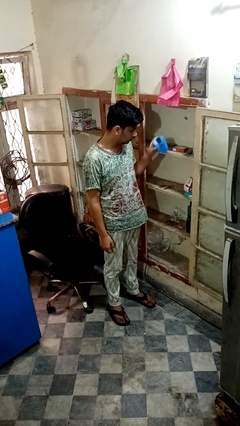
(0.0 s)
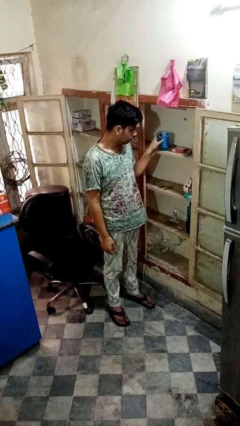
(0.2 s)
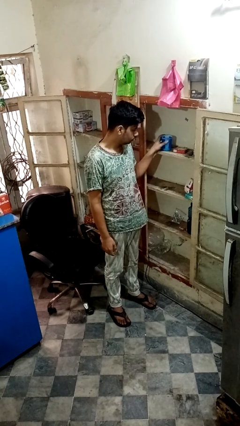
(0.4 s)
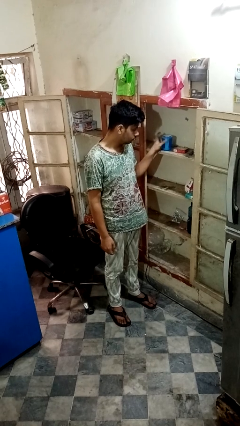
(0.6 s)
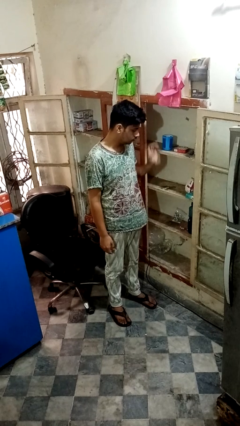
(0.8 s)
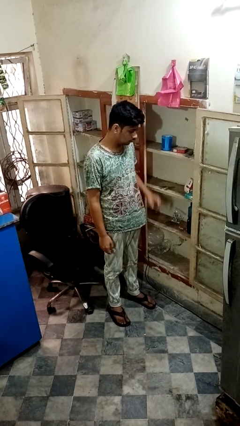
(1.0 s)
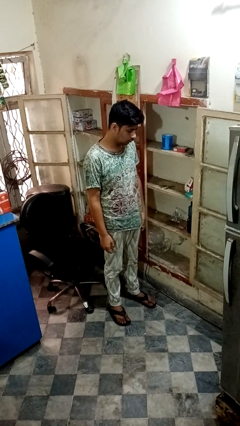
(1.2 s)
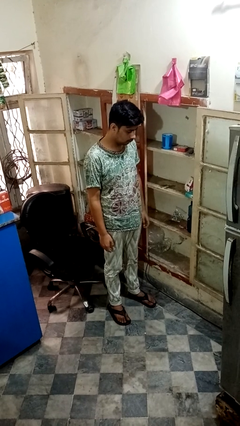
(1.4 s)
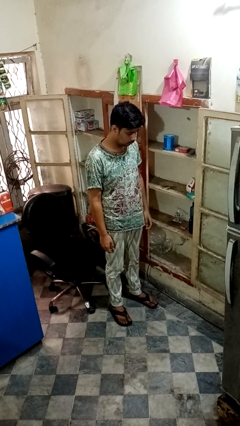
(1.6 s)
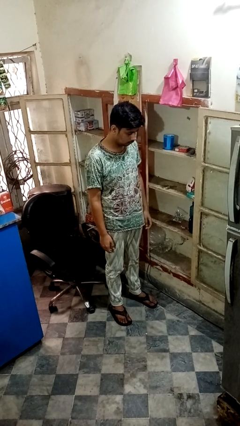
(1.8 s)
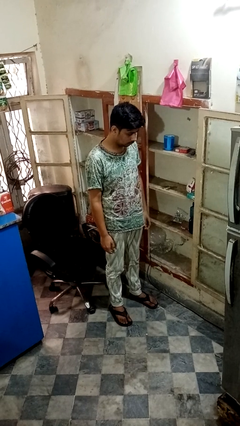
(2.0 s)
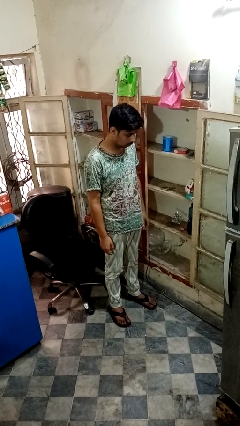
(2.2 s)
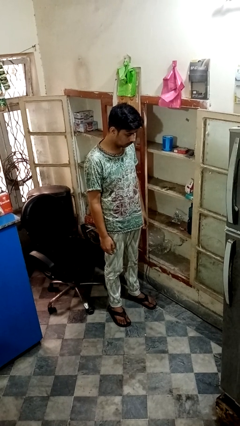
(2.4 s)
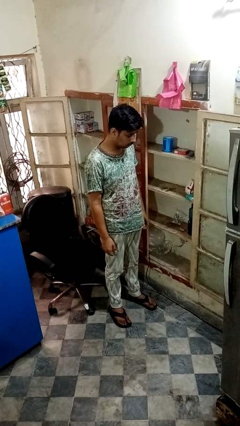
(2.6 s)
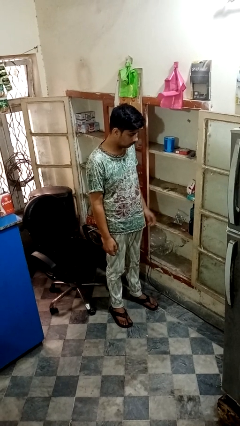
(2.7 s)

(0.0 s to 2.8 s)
person puts object in cabinet

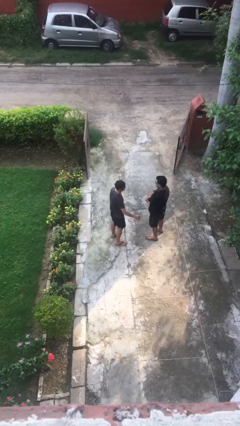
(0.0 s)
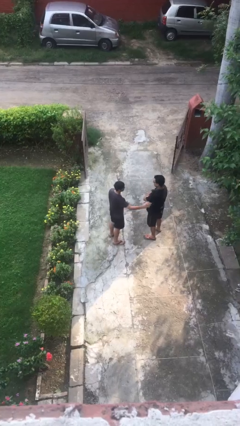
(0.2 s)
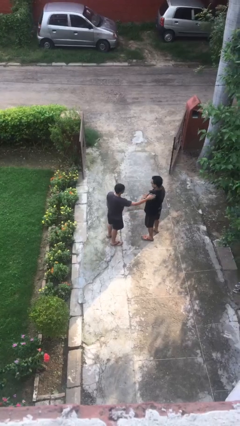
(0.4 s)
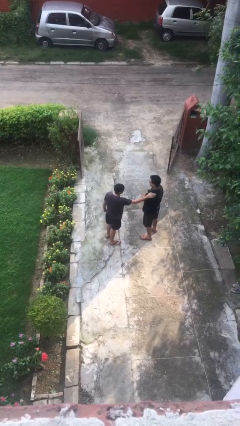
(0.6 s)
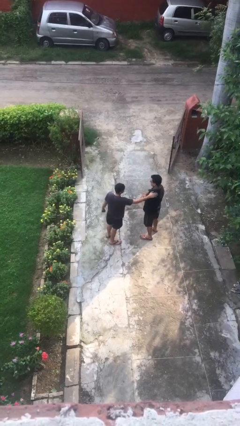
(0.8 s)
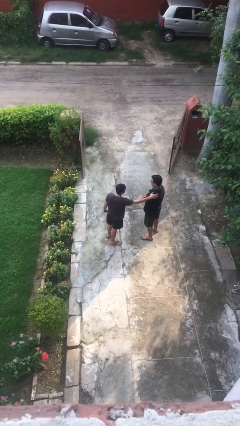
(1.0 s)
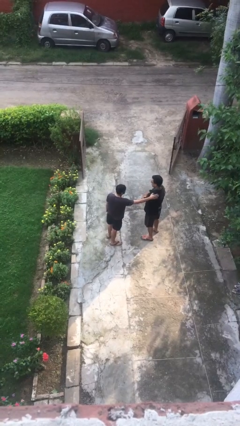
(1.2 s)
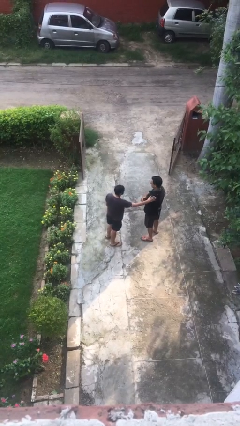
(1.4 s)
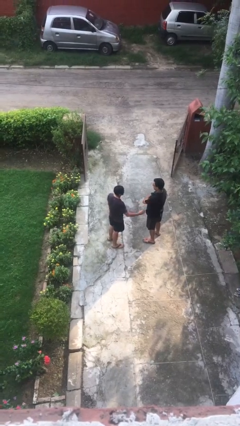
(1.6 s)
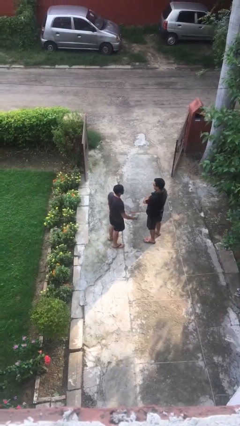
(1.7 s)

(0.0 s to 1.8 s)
person pounds shoulders of person

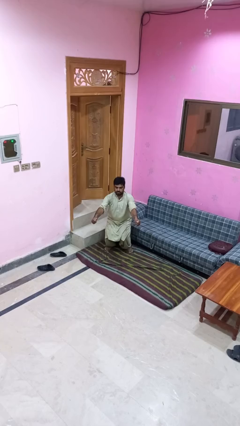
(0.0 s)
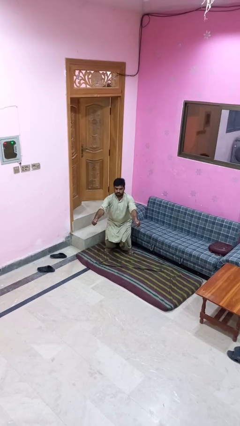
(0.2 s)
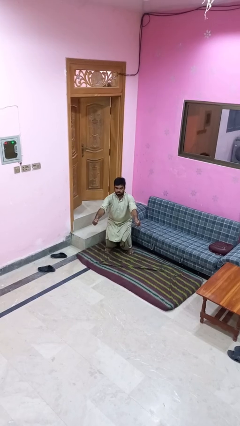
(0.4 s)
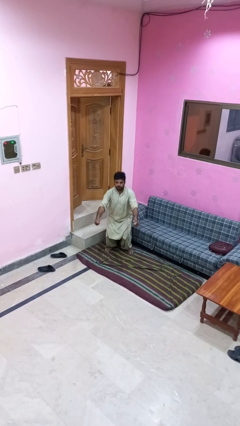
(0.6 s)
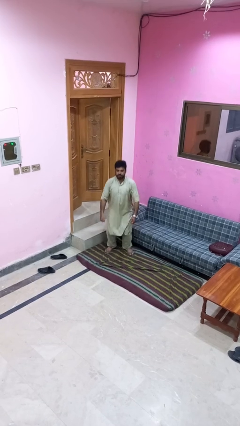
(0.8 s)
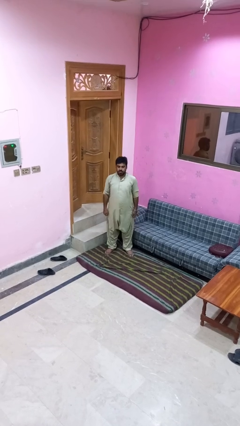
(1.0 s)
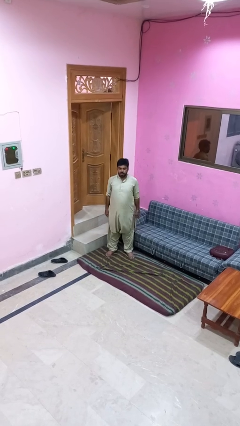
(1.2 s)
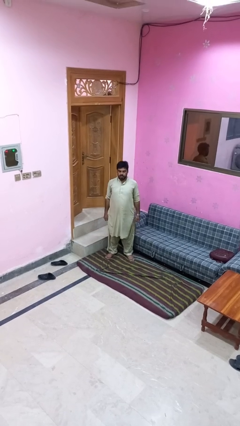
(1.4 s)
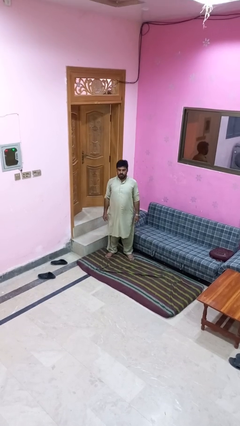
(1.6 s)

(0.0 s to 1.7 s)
person stands up

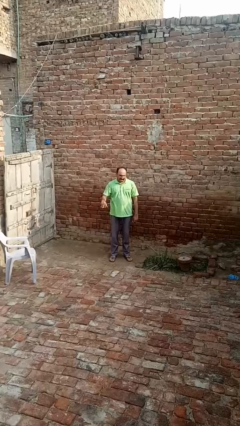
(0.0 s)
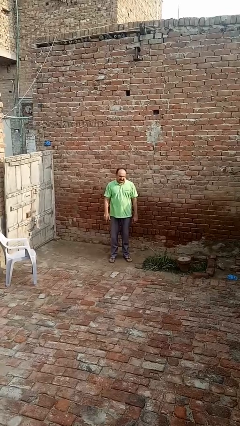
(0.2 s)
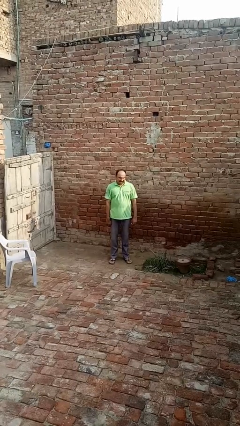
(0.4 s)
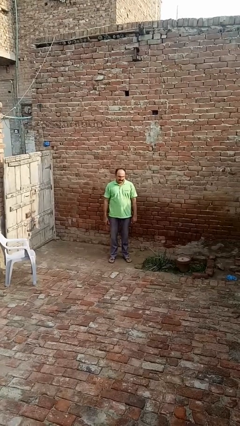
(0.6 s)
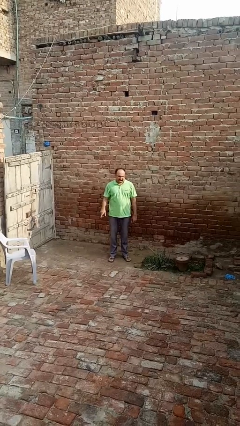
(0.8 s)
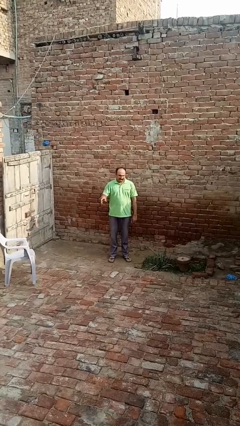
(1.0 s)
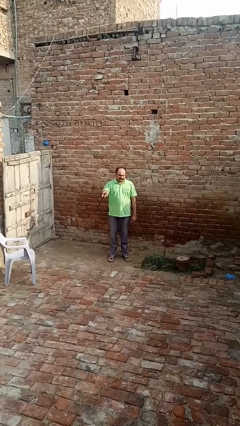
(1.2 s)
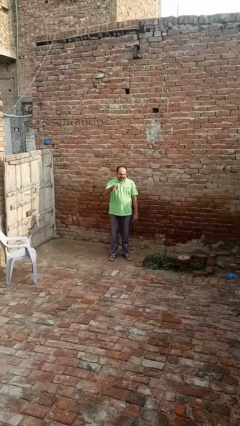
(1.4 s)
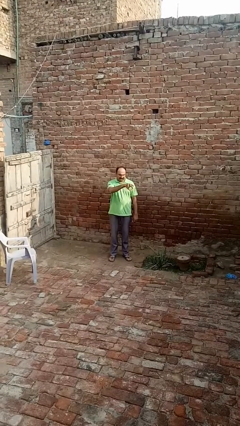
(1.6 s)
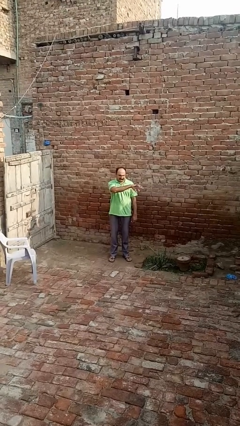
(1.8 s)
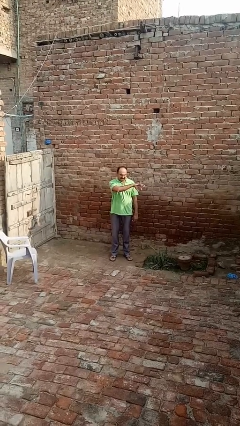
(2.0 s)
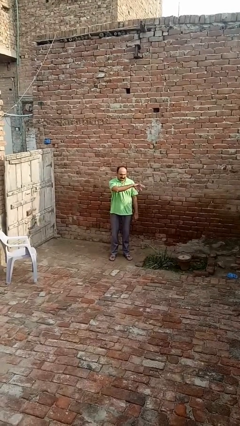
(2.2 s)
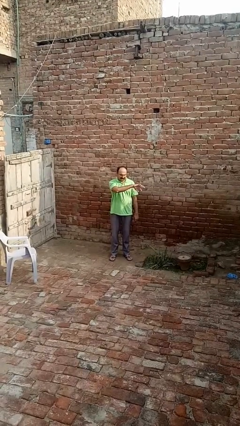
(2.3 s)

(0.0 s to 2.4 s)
person gestures swipe left

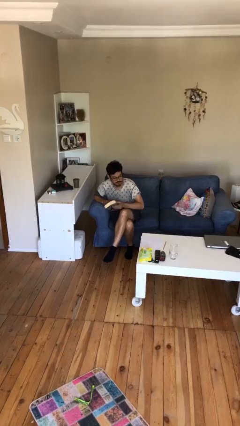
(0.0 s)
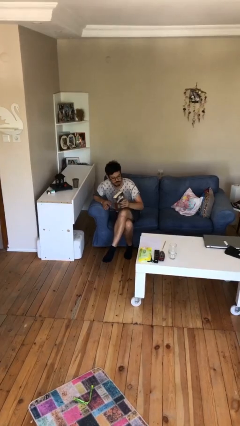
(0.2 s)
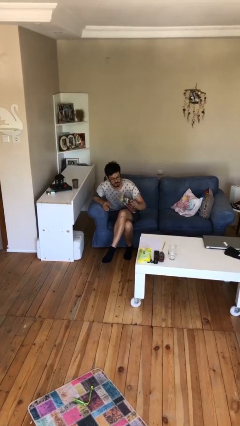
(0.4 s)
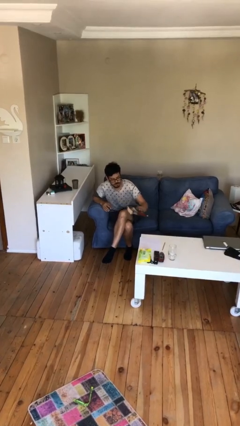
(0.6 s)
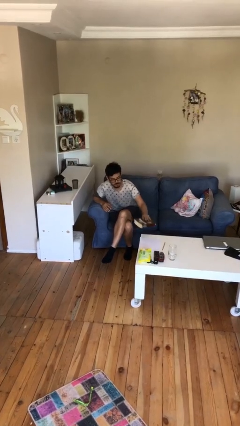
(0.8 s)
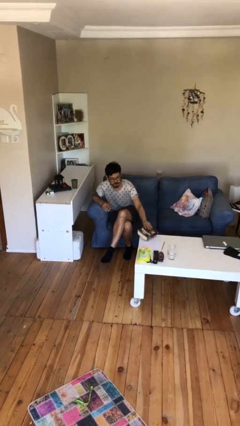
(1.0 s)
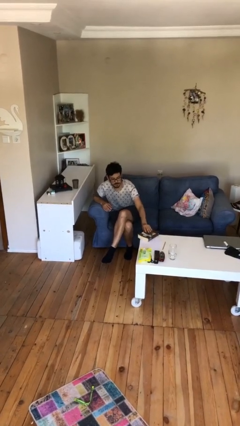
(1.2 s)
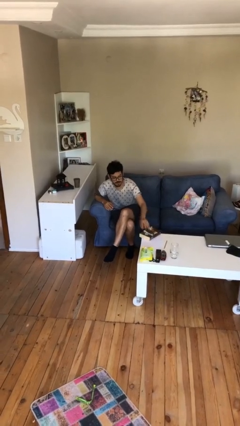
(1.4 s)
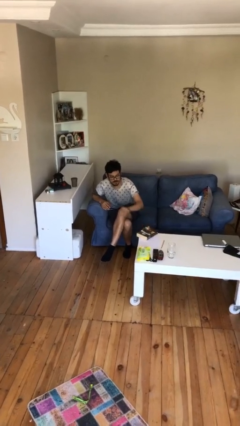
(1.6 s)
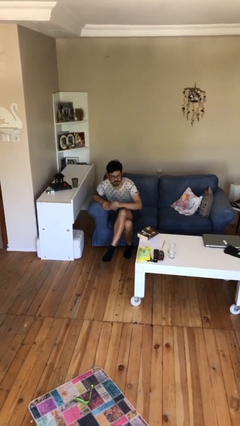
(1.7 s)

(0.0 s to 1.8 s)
person puts down object on table

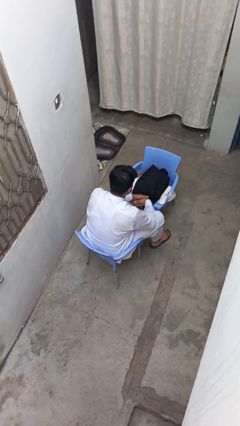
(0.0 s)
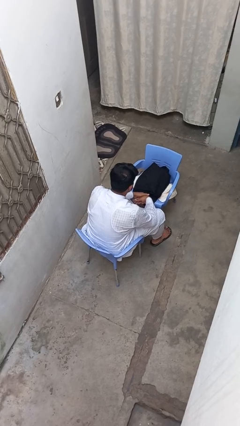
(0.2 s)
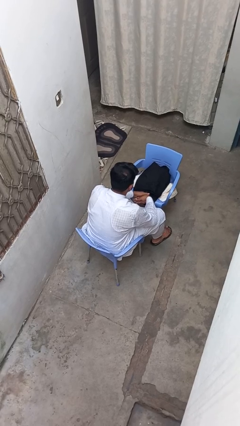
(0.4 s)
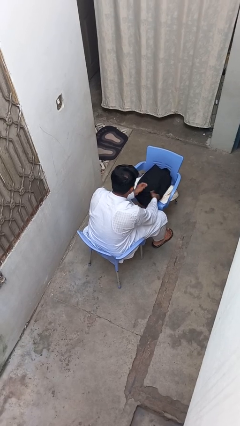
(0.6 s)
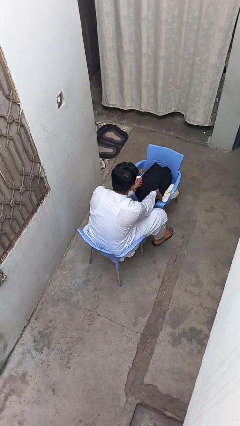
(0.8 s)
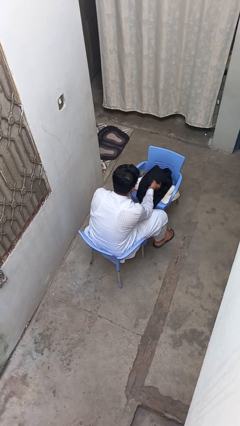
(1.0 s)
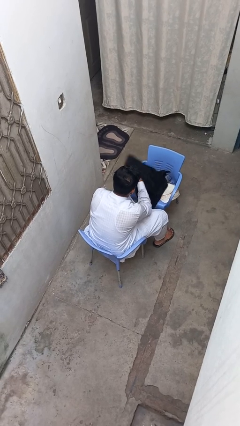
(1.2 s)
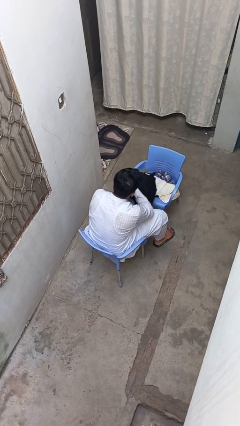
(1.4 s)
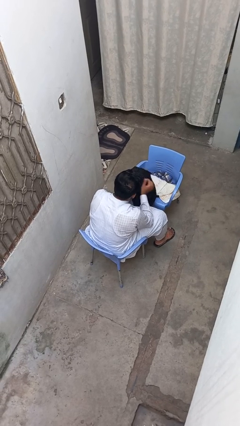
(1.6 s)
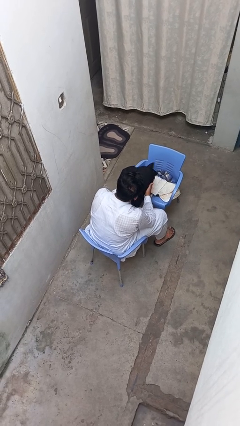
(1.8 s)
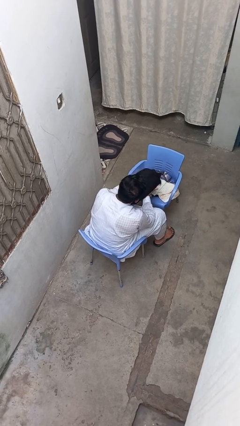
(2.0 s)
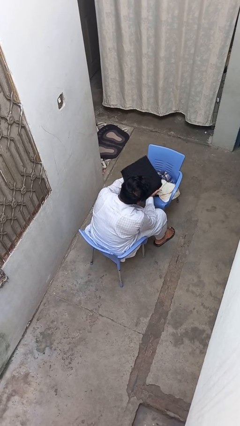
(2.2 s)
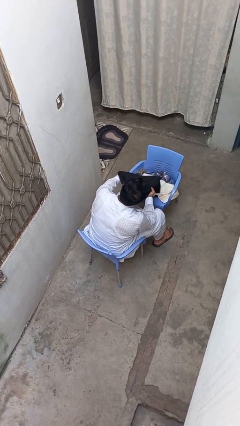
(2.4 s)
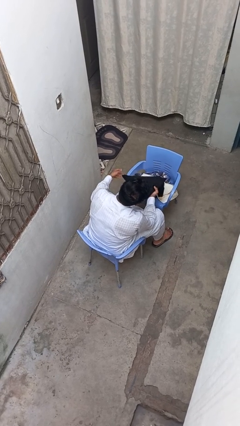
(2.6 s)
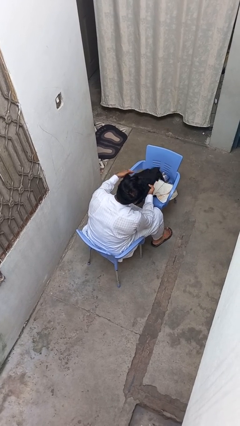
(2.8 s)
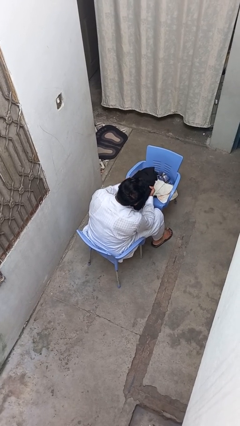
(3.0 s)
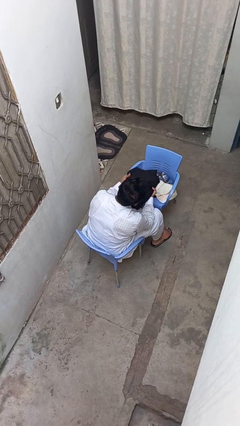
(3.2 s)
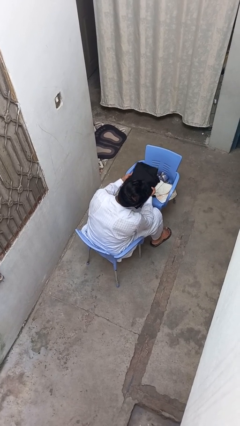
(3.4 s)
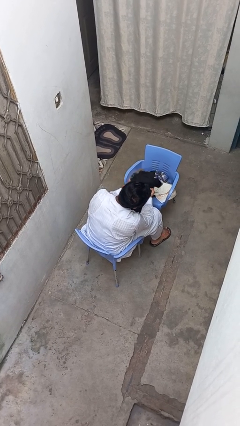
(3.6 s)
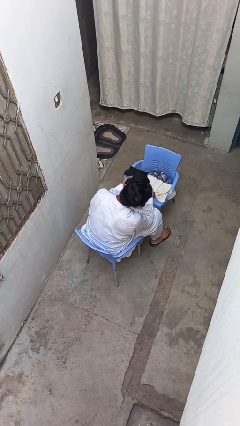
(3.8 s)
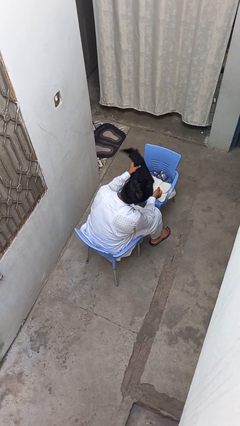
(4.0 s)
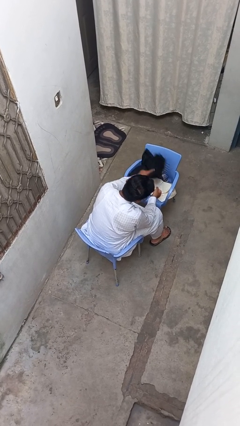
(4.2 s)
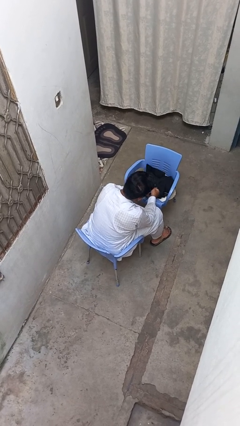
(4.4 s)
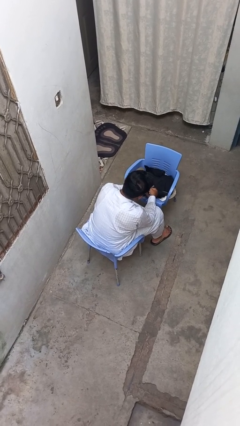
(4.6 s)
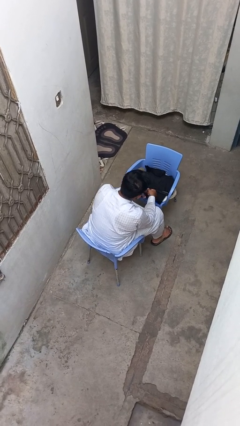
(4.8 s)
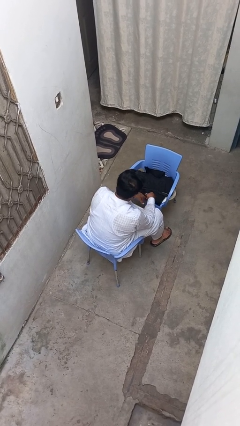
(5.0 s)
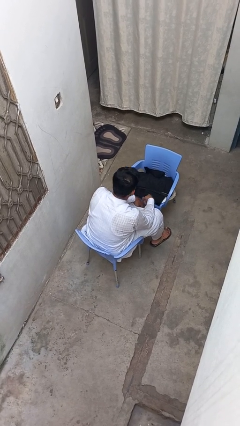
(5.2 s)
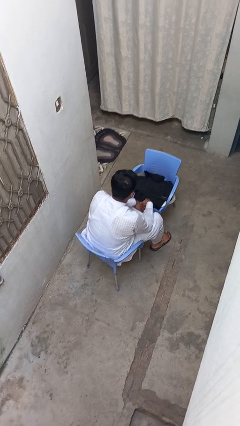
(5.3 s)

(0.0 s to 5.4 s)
person folds pants

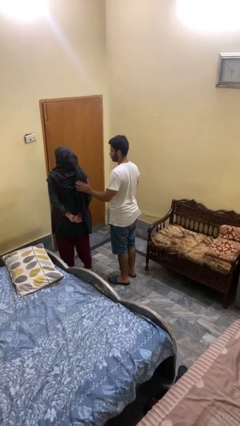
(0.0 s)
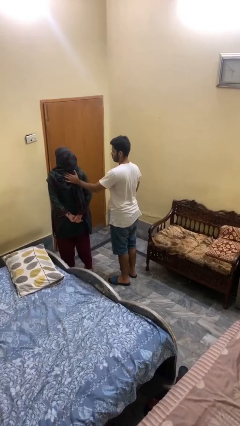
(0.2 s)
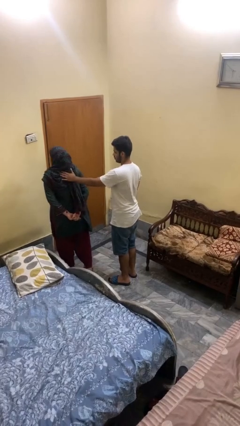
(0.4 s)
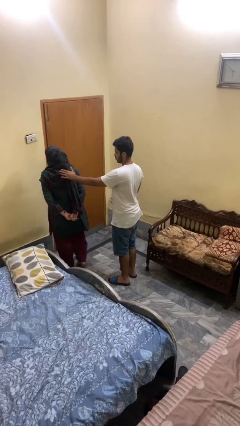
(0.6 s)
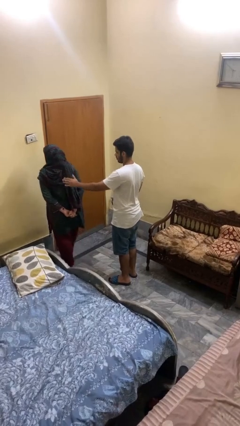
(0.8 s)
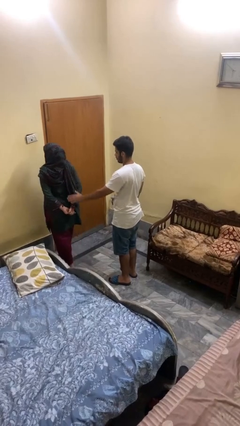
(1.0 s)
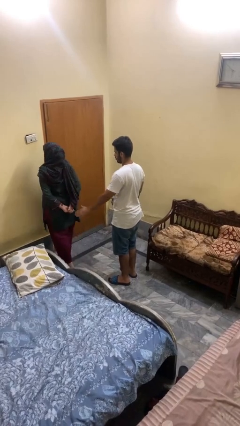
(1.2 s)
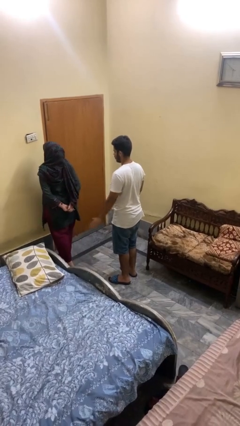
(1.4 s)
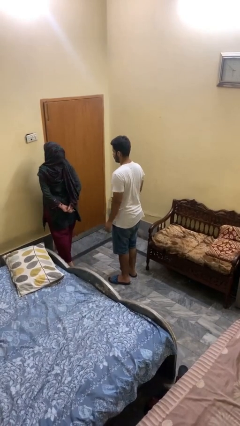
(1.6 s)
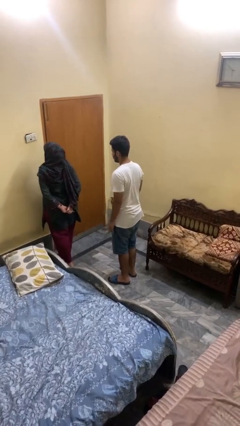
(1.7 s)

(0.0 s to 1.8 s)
person shoves person
